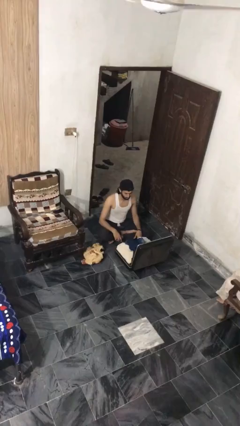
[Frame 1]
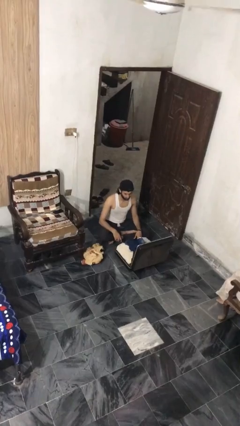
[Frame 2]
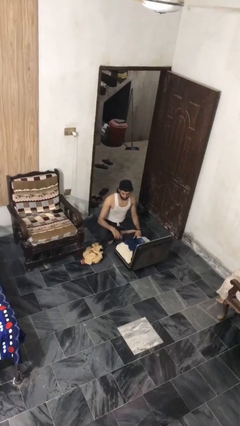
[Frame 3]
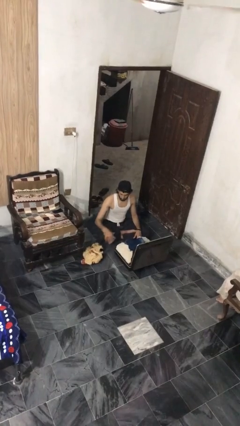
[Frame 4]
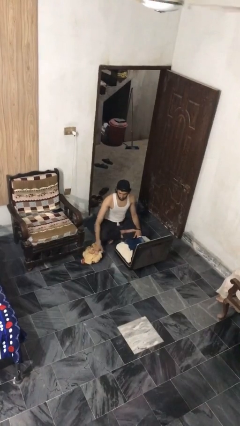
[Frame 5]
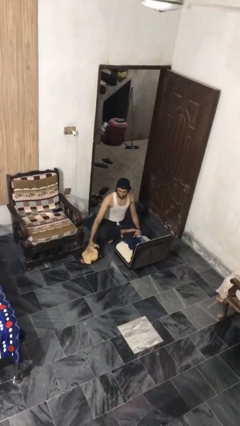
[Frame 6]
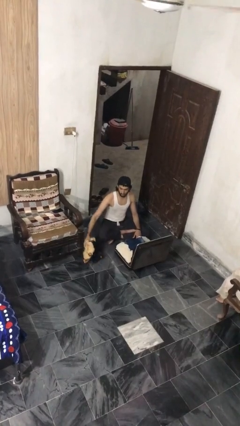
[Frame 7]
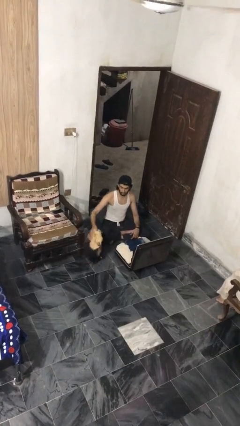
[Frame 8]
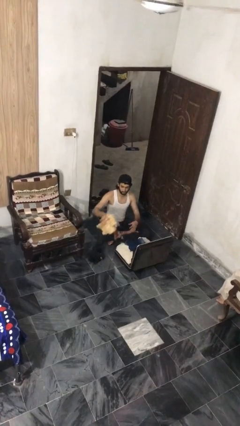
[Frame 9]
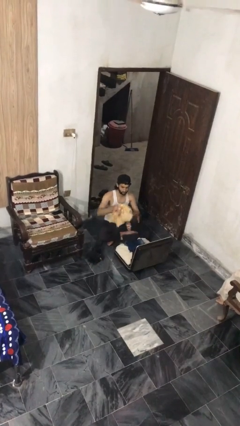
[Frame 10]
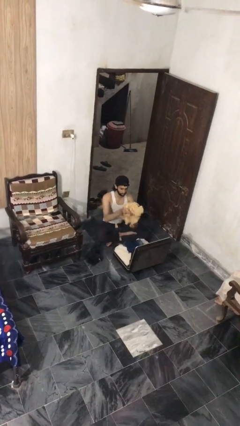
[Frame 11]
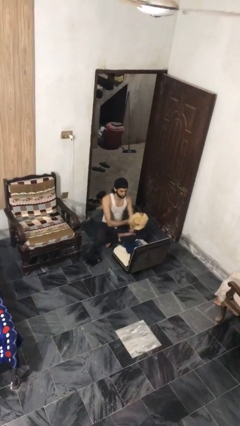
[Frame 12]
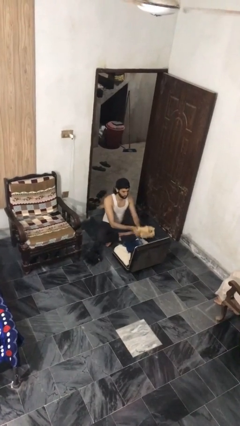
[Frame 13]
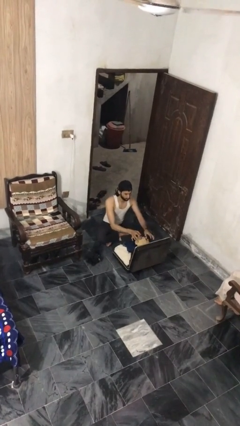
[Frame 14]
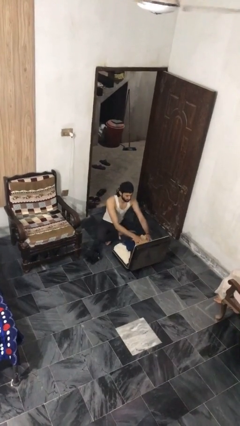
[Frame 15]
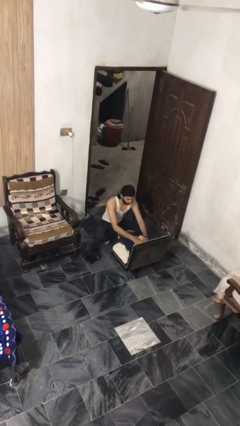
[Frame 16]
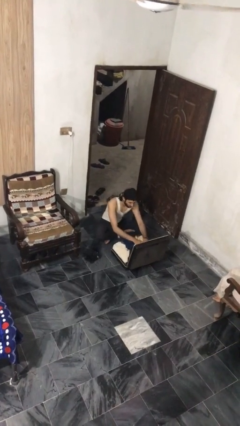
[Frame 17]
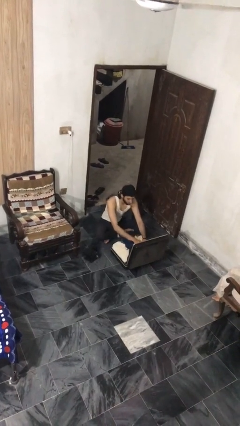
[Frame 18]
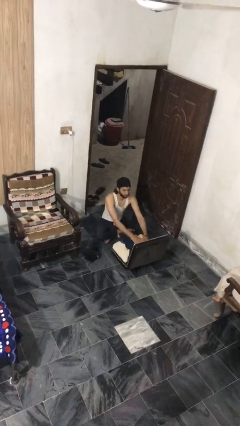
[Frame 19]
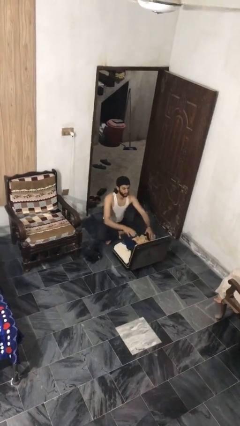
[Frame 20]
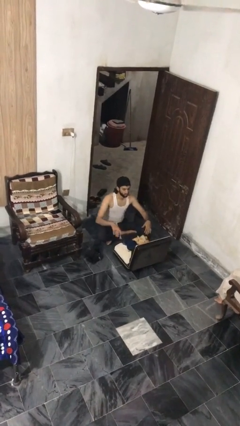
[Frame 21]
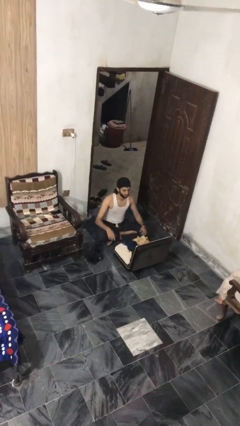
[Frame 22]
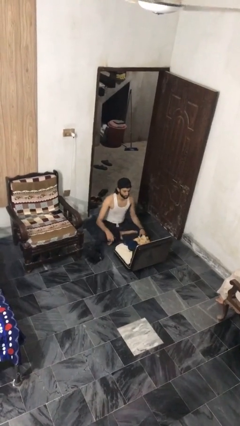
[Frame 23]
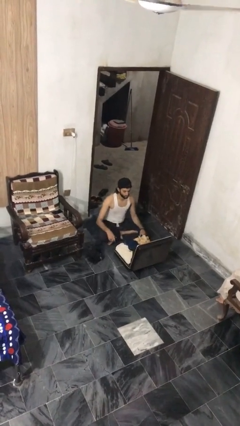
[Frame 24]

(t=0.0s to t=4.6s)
person loads clothes into suitcase

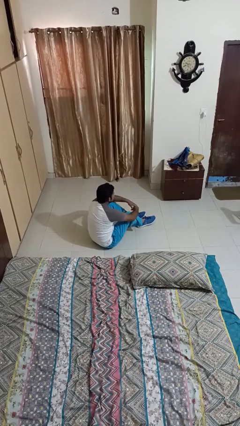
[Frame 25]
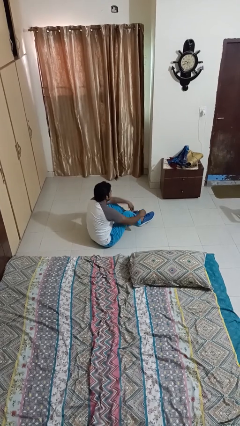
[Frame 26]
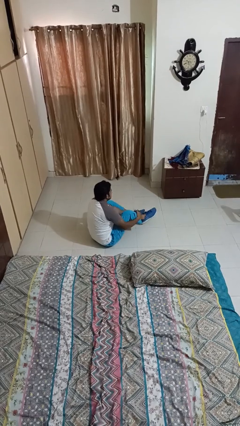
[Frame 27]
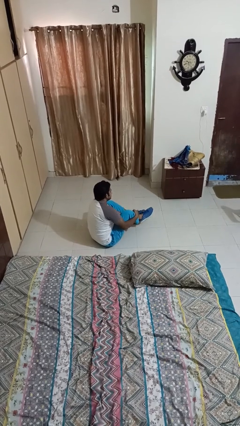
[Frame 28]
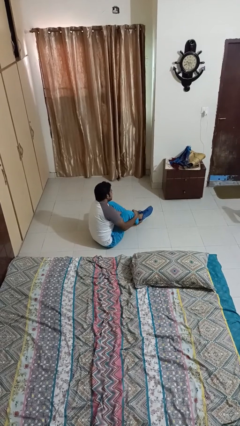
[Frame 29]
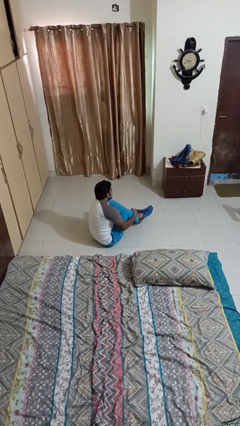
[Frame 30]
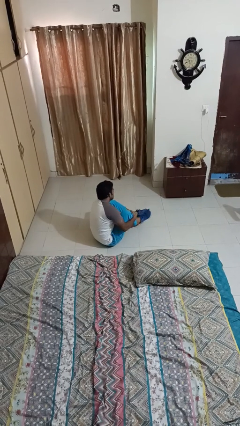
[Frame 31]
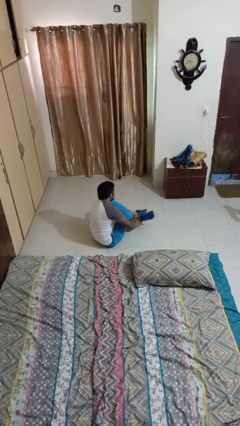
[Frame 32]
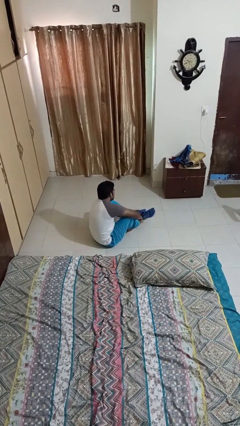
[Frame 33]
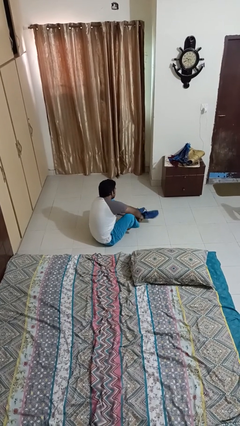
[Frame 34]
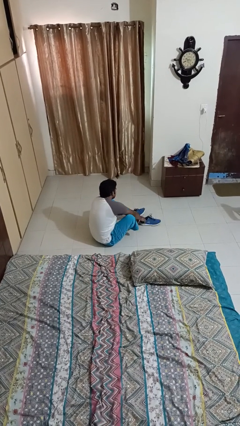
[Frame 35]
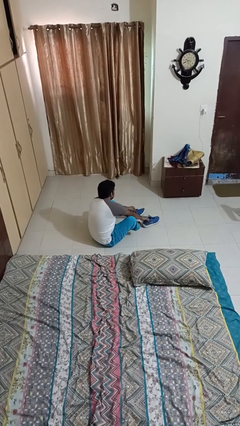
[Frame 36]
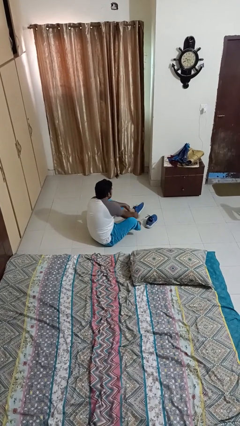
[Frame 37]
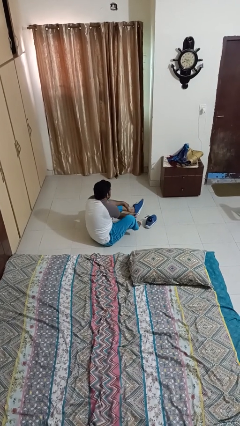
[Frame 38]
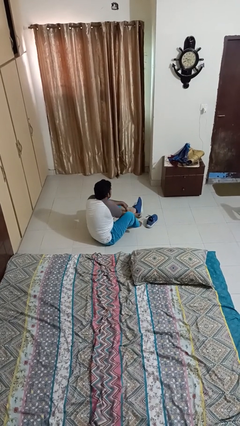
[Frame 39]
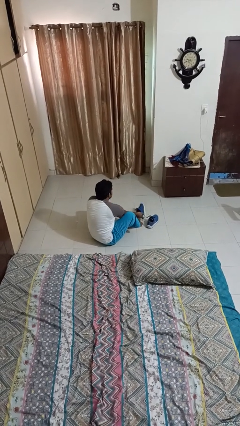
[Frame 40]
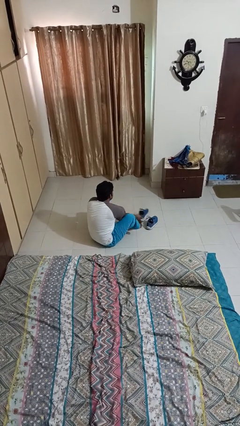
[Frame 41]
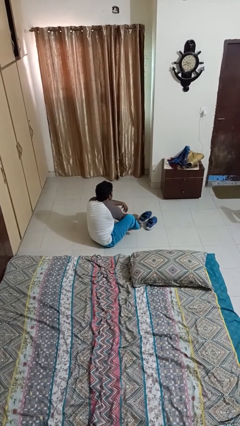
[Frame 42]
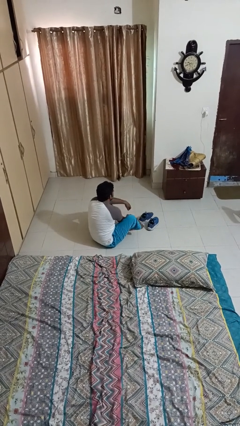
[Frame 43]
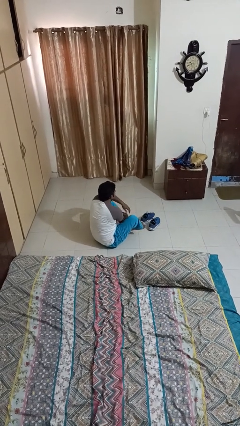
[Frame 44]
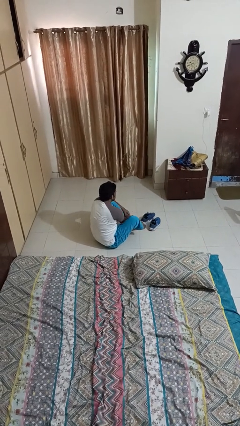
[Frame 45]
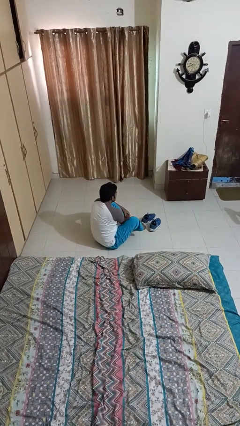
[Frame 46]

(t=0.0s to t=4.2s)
person takes off shoes

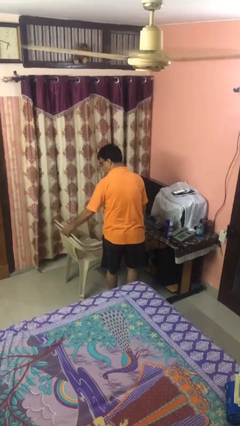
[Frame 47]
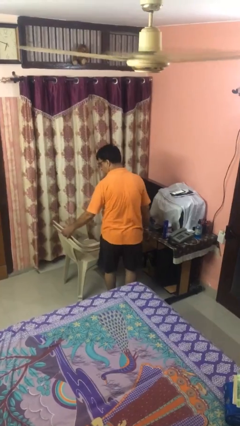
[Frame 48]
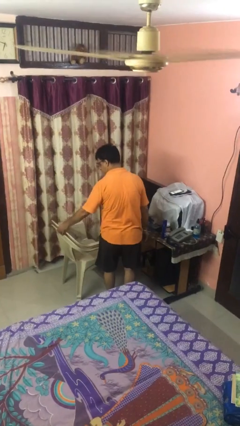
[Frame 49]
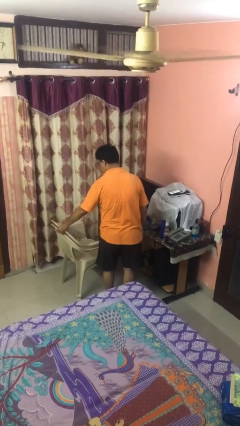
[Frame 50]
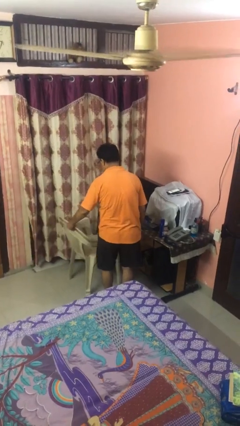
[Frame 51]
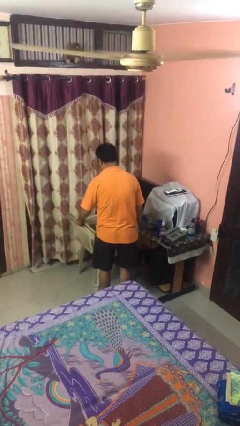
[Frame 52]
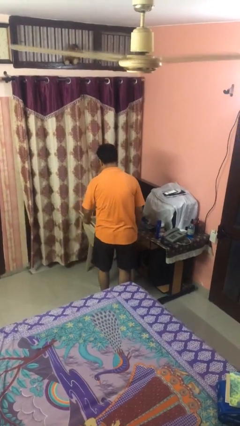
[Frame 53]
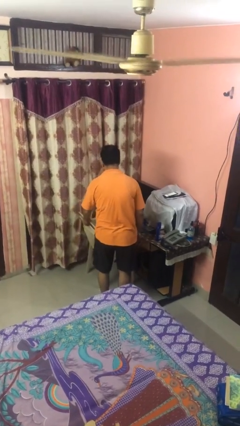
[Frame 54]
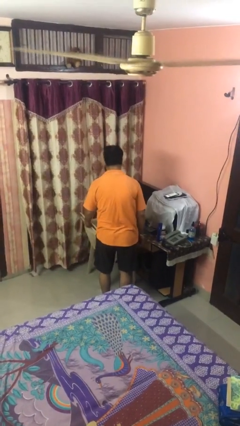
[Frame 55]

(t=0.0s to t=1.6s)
person pushes in chair

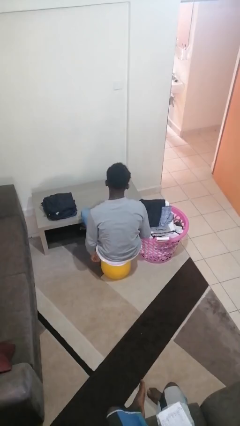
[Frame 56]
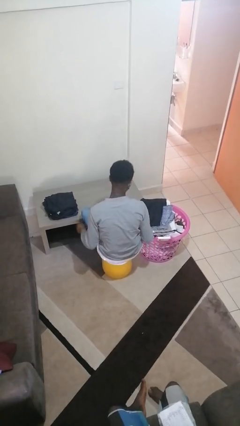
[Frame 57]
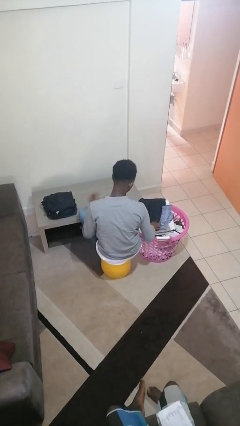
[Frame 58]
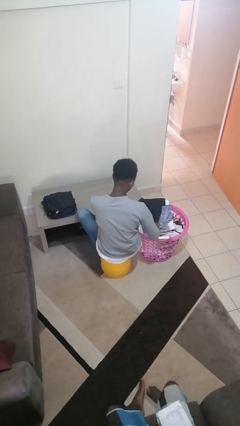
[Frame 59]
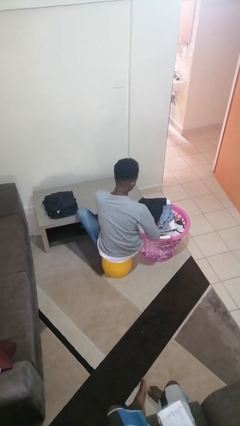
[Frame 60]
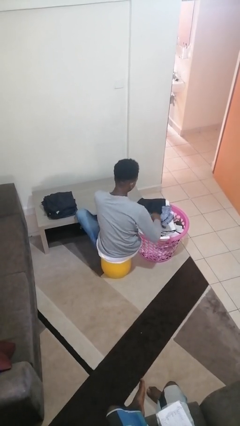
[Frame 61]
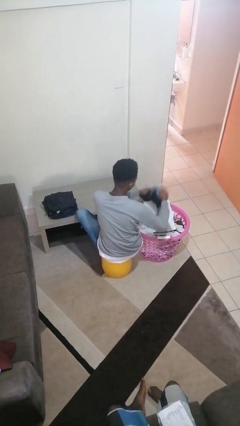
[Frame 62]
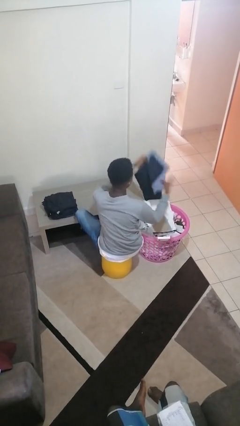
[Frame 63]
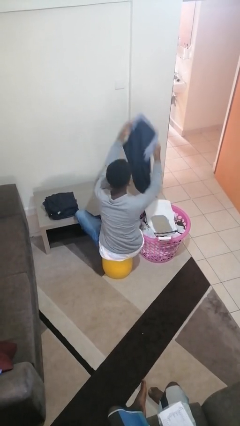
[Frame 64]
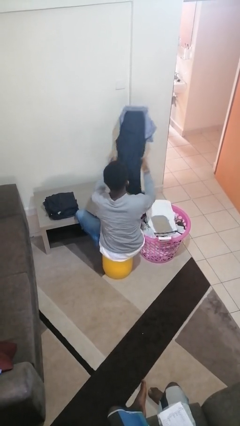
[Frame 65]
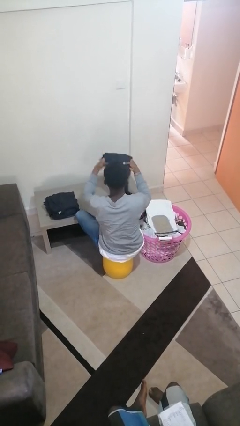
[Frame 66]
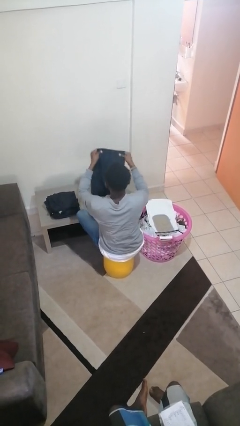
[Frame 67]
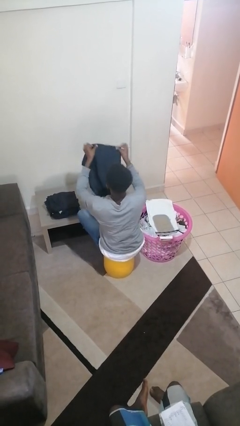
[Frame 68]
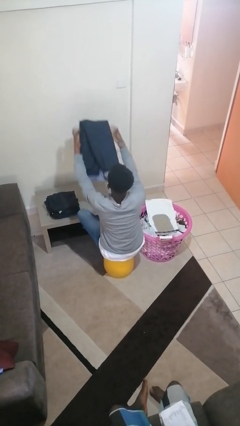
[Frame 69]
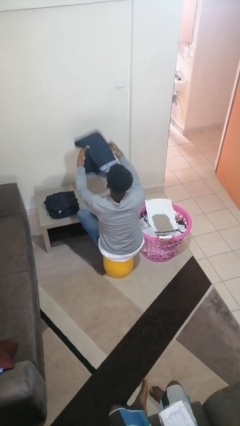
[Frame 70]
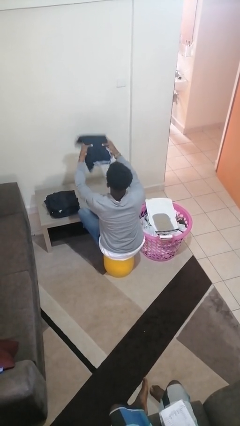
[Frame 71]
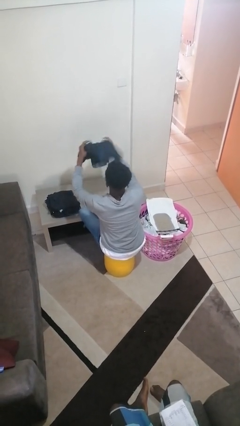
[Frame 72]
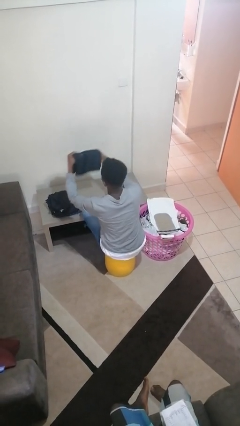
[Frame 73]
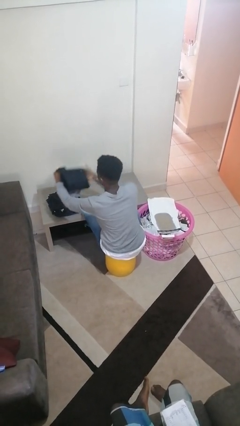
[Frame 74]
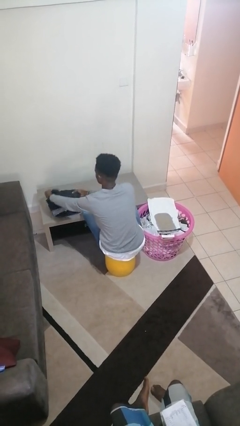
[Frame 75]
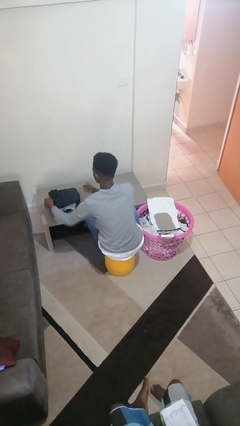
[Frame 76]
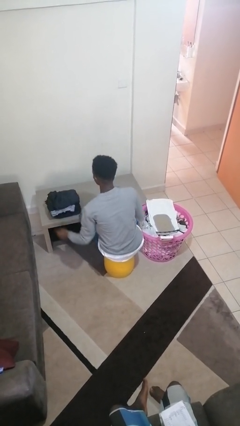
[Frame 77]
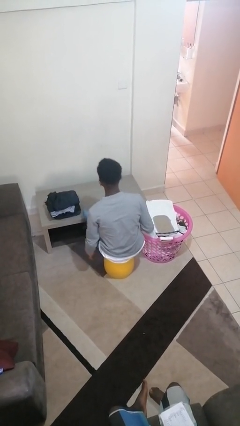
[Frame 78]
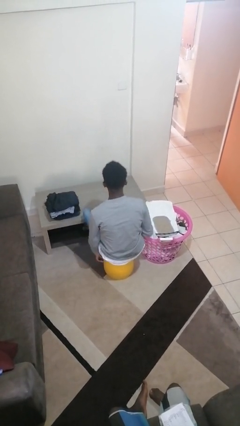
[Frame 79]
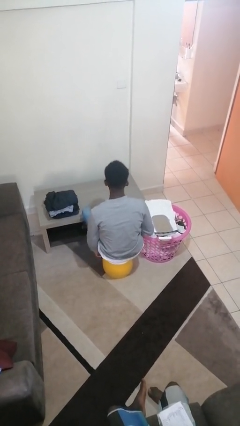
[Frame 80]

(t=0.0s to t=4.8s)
person folds pants

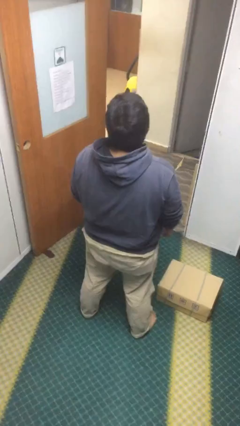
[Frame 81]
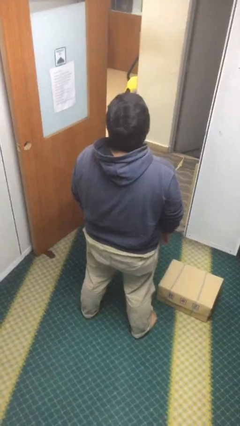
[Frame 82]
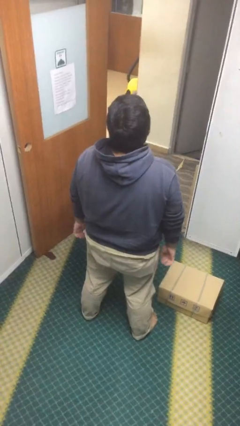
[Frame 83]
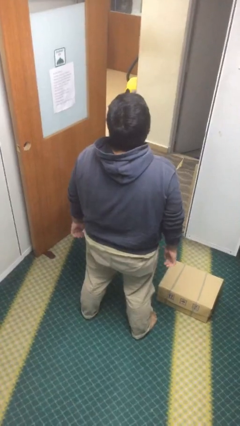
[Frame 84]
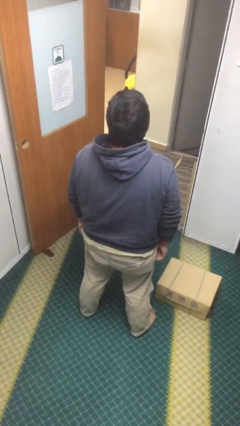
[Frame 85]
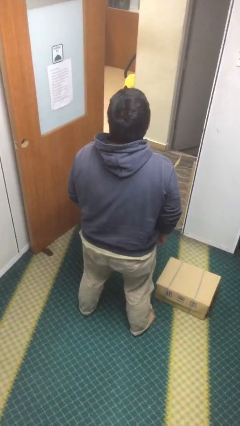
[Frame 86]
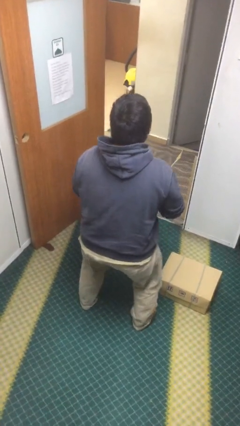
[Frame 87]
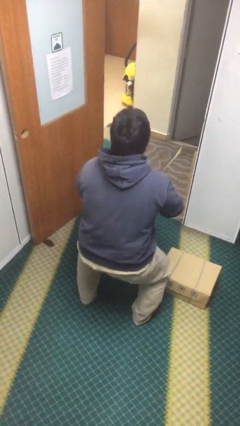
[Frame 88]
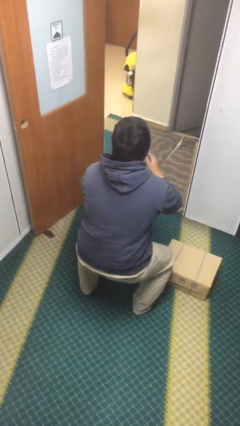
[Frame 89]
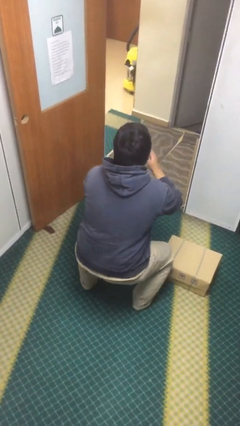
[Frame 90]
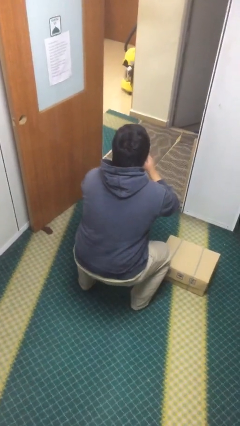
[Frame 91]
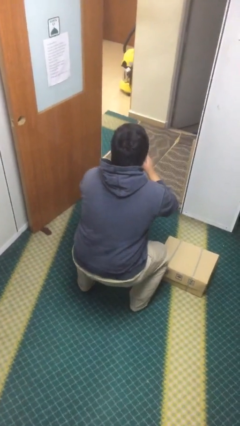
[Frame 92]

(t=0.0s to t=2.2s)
person squats
